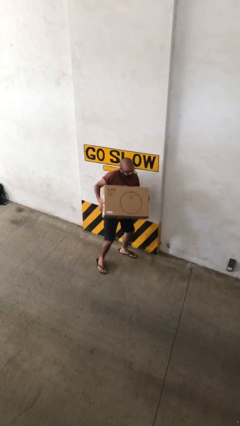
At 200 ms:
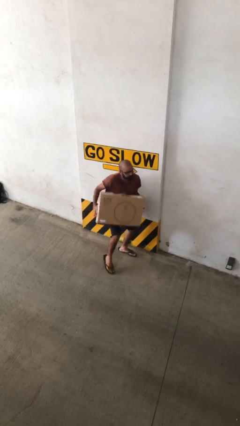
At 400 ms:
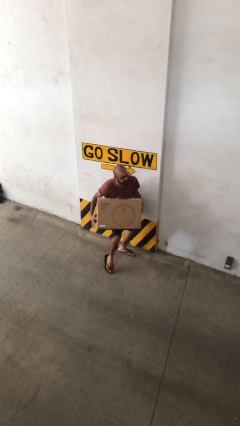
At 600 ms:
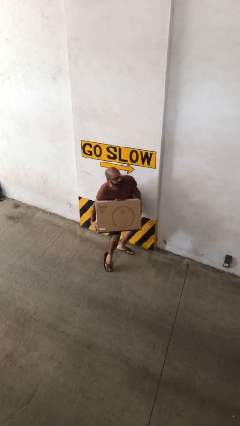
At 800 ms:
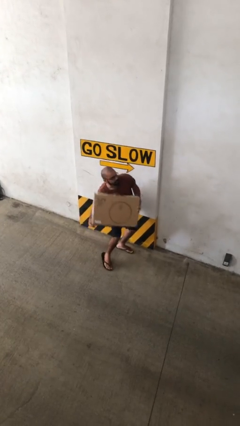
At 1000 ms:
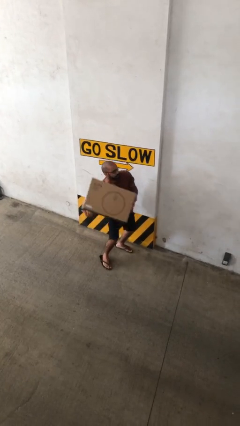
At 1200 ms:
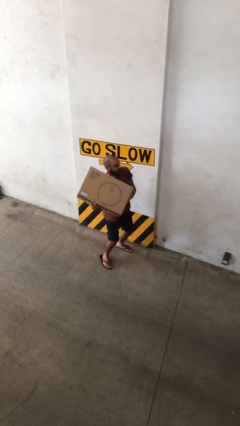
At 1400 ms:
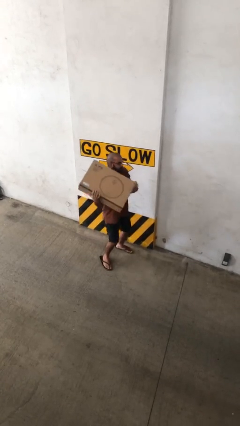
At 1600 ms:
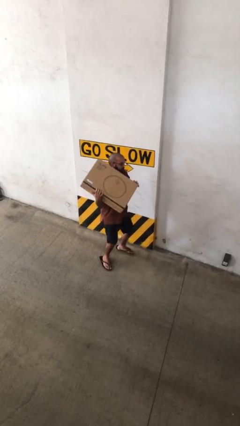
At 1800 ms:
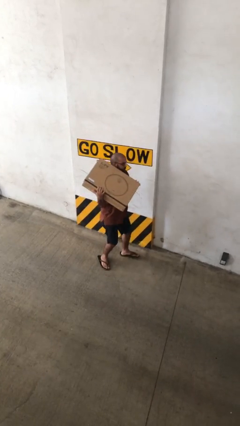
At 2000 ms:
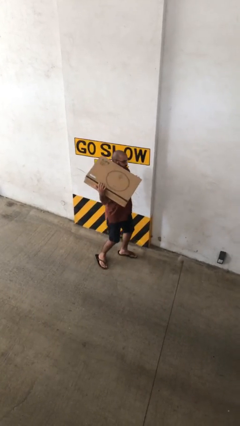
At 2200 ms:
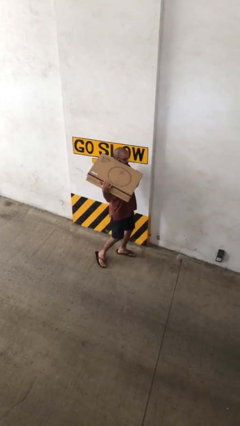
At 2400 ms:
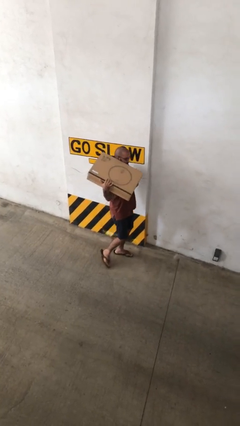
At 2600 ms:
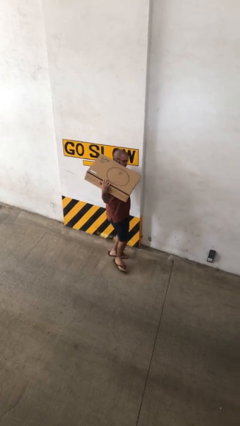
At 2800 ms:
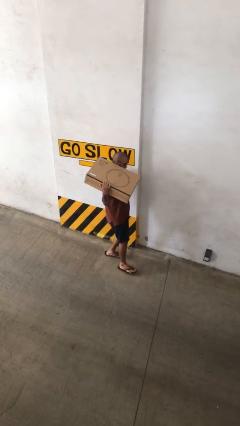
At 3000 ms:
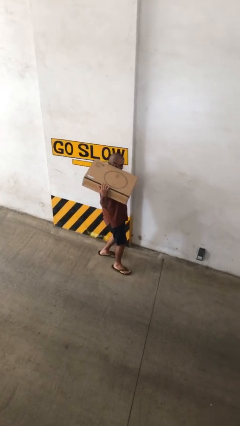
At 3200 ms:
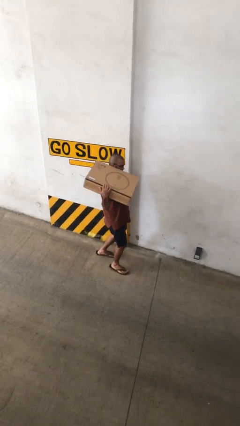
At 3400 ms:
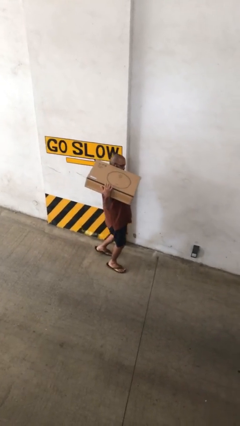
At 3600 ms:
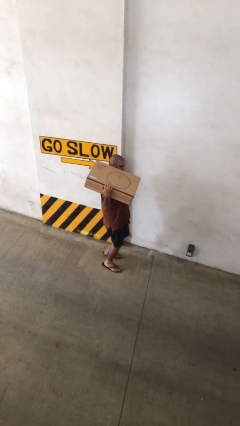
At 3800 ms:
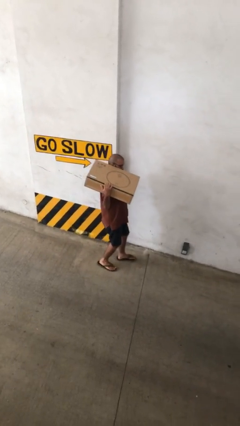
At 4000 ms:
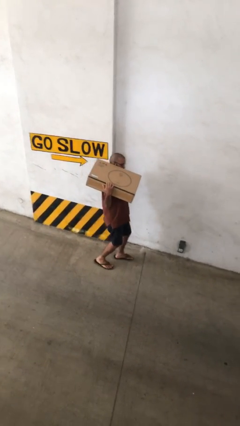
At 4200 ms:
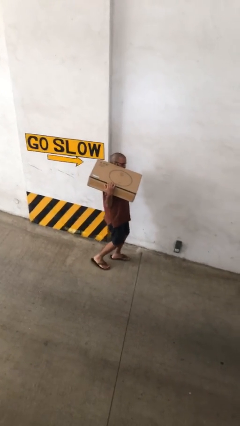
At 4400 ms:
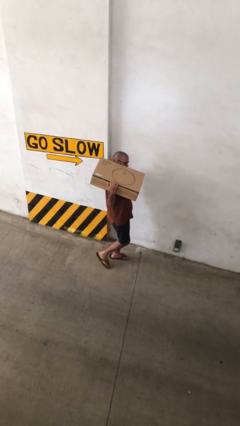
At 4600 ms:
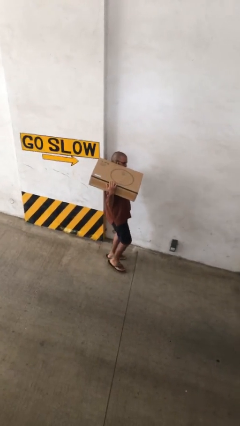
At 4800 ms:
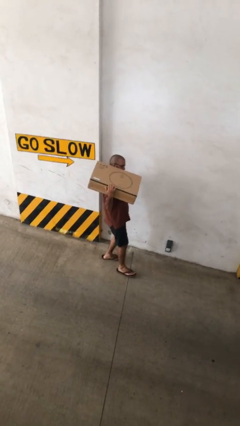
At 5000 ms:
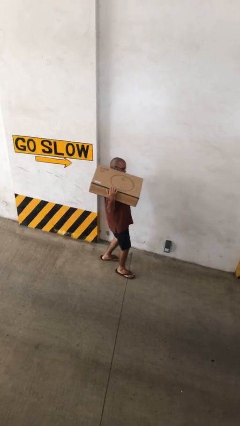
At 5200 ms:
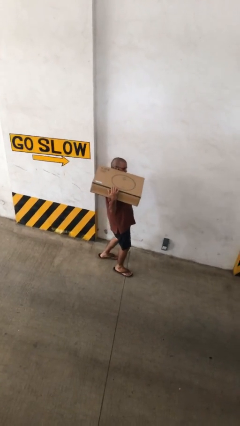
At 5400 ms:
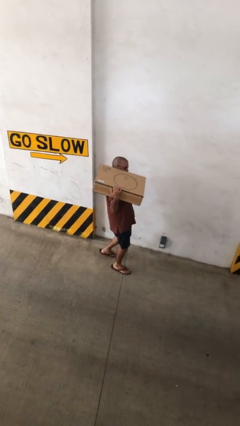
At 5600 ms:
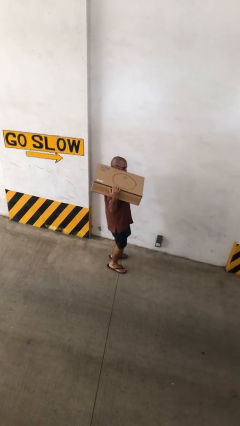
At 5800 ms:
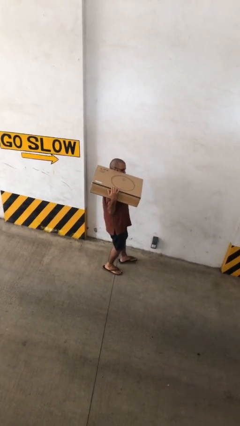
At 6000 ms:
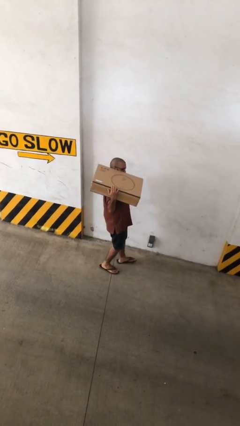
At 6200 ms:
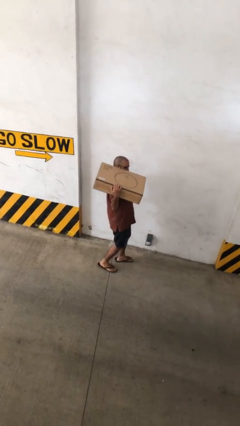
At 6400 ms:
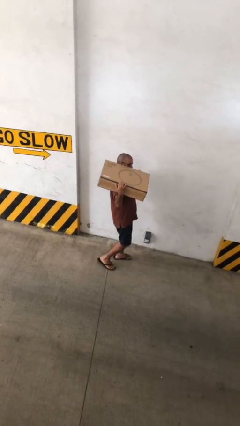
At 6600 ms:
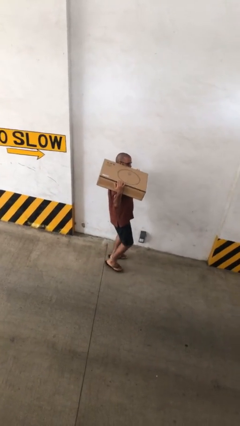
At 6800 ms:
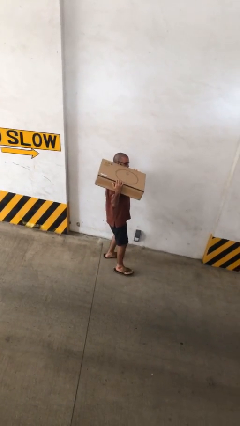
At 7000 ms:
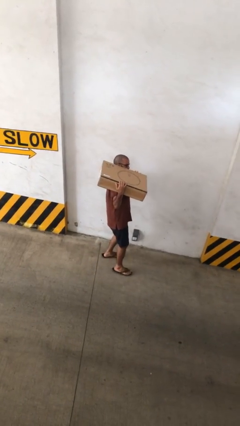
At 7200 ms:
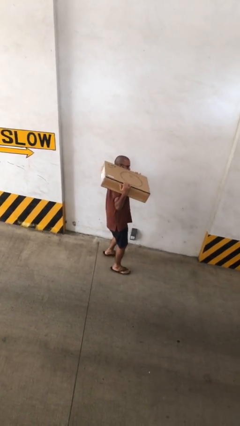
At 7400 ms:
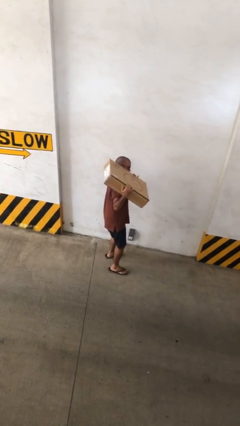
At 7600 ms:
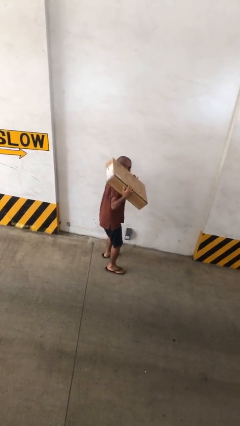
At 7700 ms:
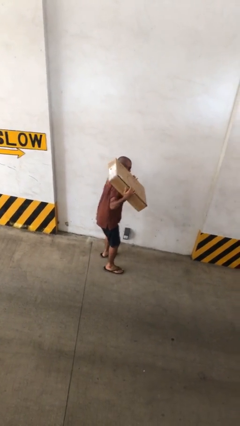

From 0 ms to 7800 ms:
person carries heavy object

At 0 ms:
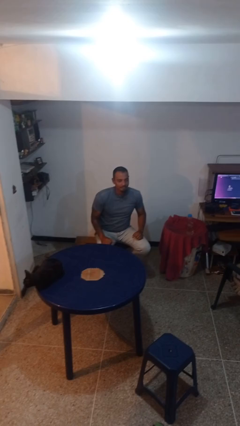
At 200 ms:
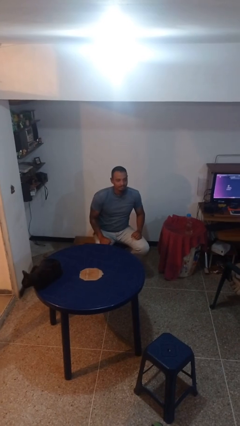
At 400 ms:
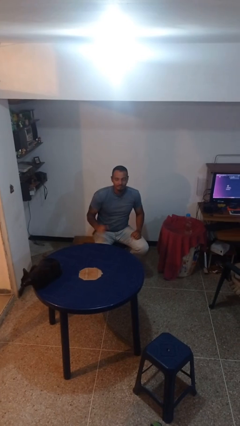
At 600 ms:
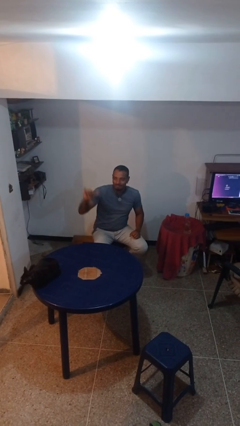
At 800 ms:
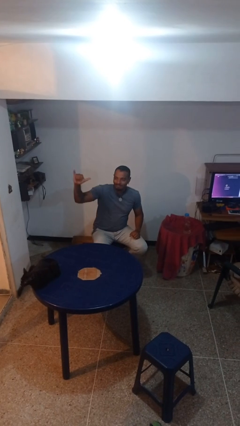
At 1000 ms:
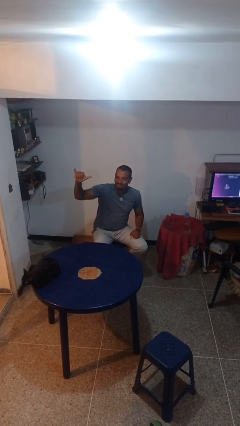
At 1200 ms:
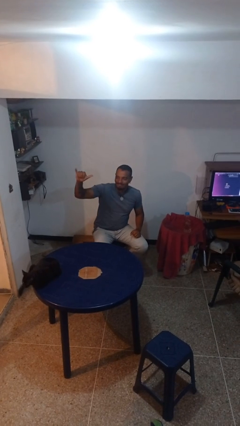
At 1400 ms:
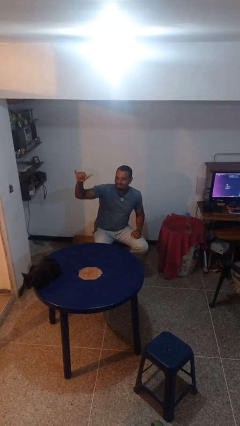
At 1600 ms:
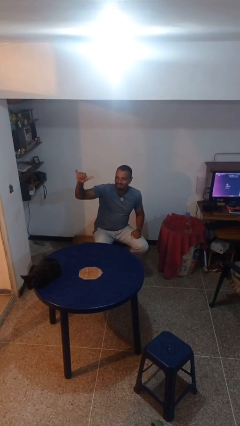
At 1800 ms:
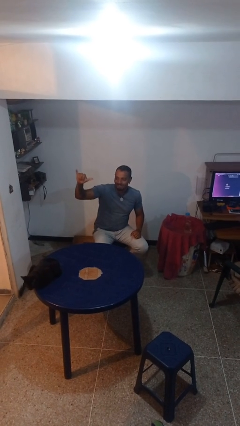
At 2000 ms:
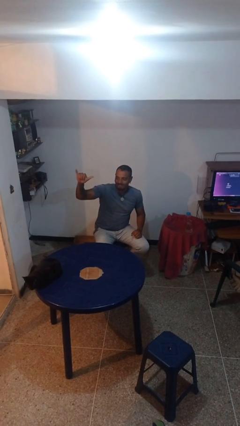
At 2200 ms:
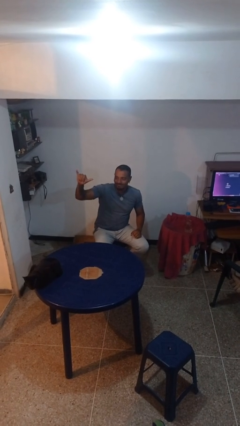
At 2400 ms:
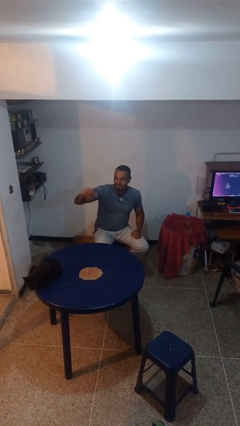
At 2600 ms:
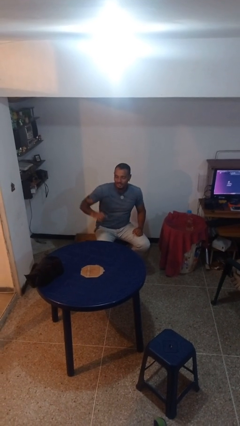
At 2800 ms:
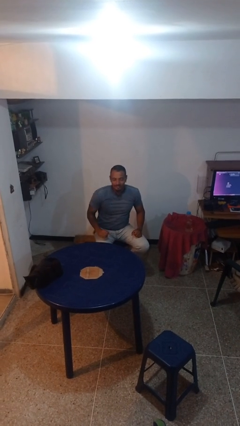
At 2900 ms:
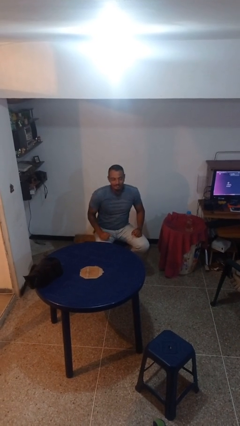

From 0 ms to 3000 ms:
person gestures hang loose

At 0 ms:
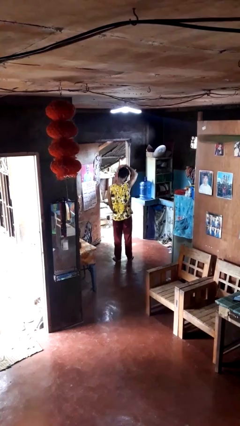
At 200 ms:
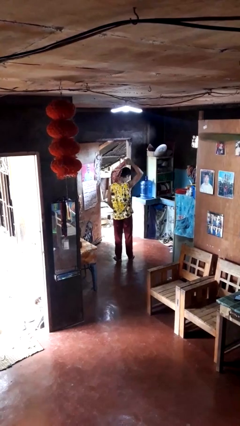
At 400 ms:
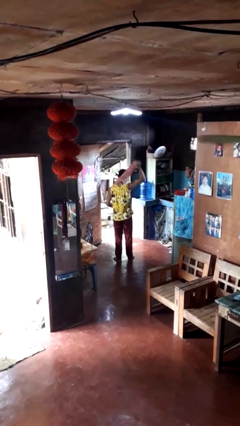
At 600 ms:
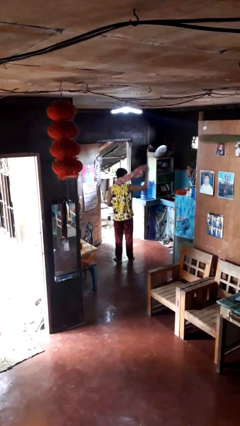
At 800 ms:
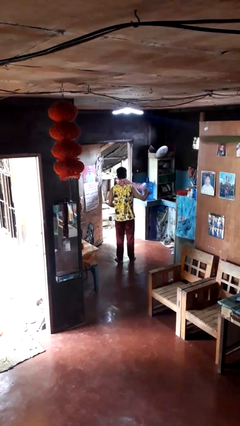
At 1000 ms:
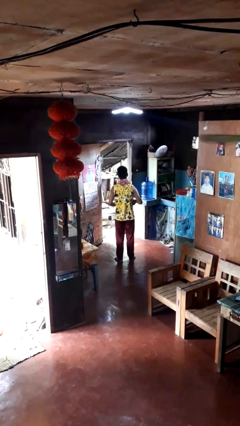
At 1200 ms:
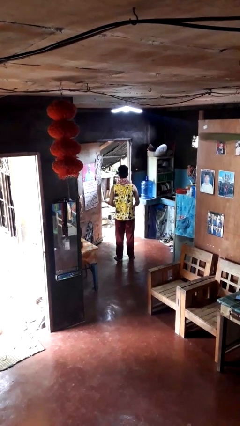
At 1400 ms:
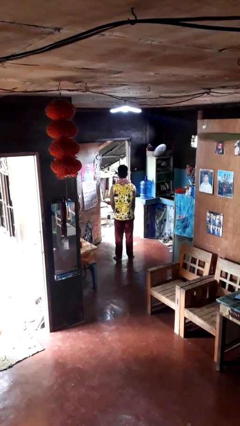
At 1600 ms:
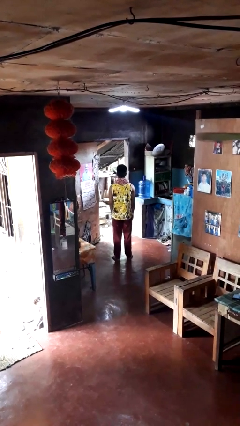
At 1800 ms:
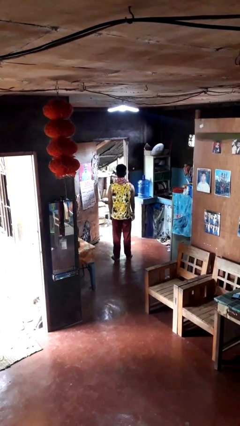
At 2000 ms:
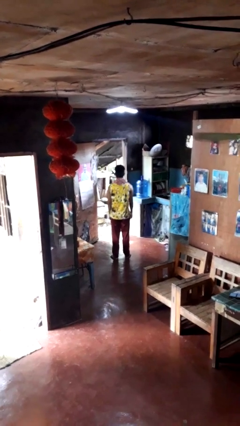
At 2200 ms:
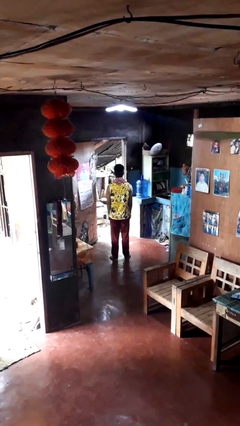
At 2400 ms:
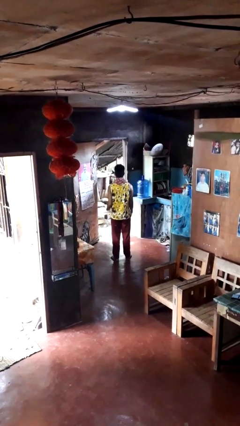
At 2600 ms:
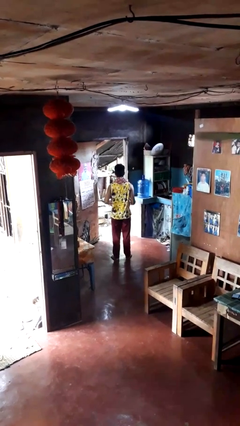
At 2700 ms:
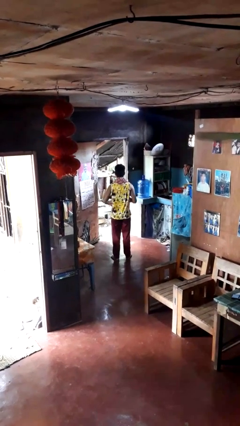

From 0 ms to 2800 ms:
person puts on scarf

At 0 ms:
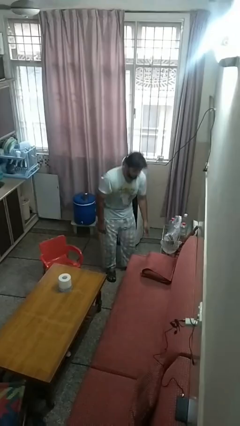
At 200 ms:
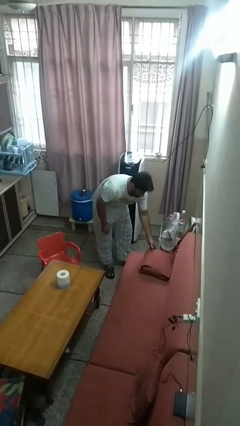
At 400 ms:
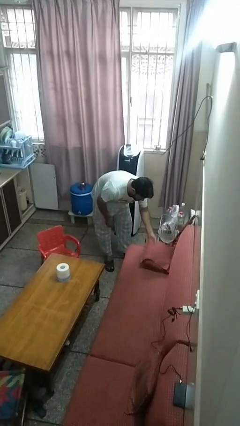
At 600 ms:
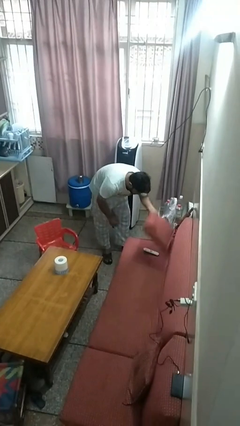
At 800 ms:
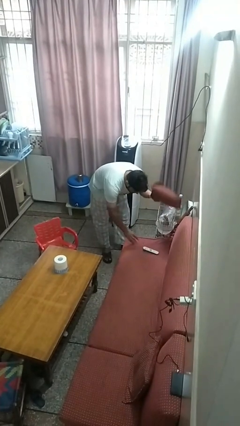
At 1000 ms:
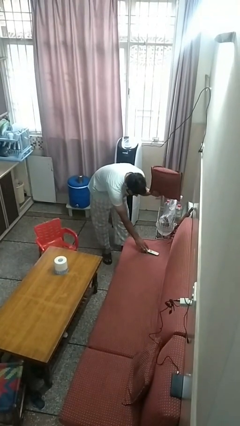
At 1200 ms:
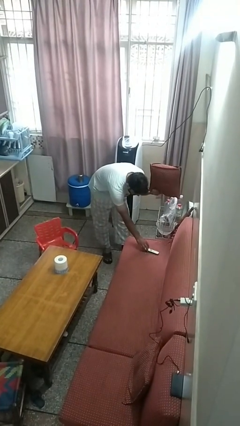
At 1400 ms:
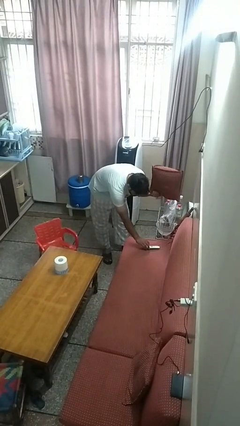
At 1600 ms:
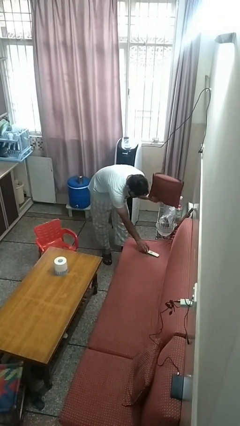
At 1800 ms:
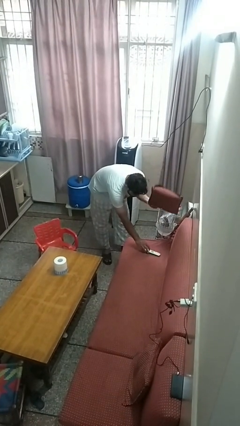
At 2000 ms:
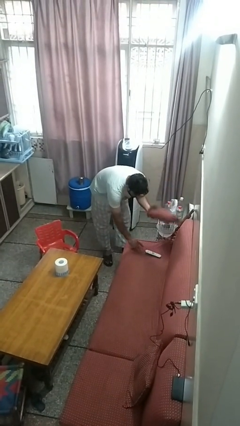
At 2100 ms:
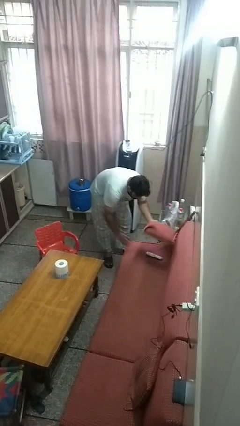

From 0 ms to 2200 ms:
person searches in couch

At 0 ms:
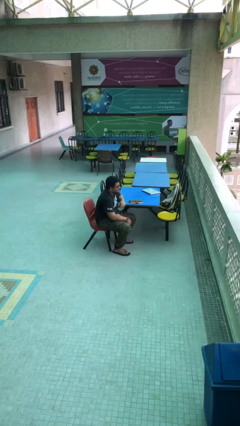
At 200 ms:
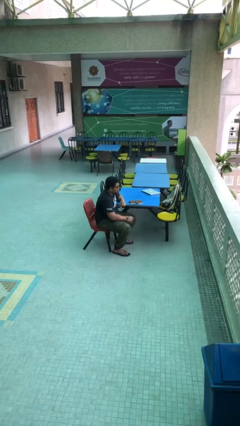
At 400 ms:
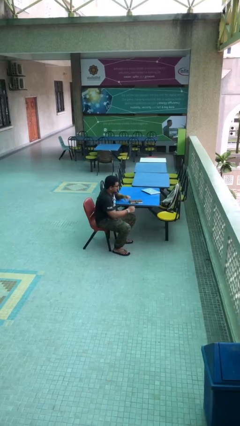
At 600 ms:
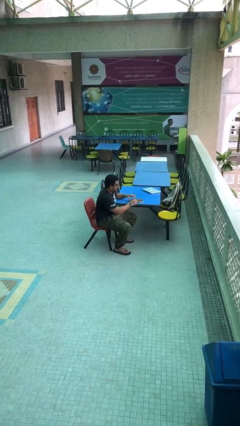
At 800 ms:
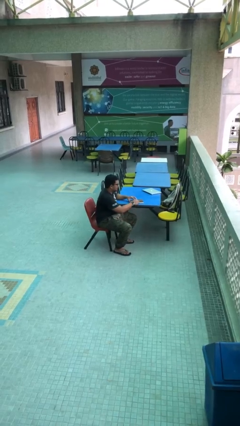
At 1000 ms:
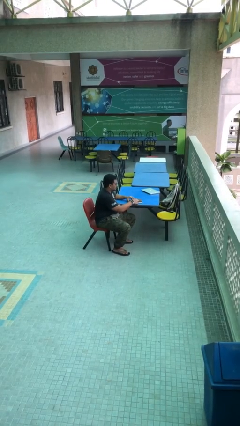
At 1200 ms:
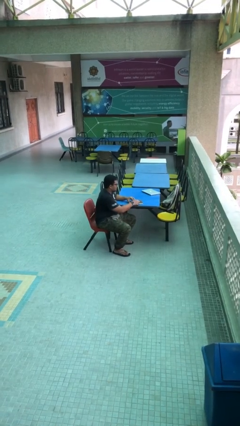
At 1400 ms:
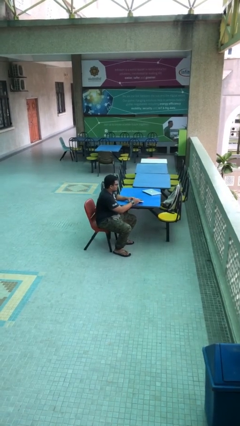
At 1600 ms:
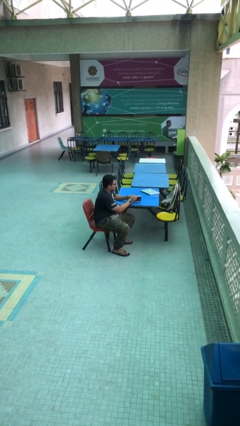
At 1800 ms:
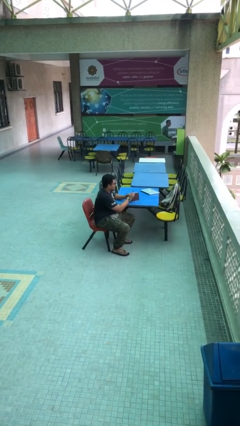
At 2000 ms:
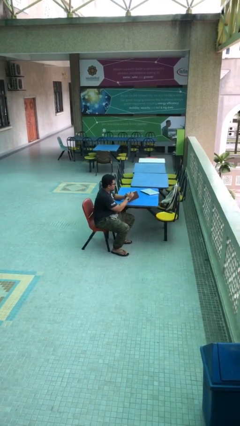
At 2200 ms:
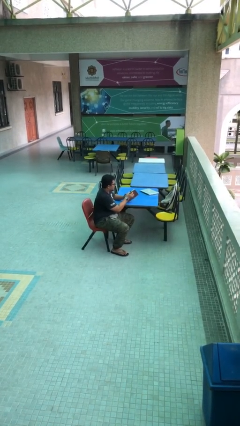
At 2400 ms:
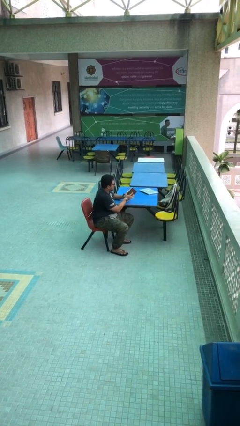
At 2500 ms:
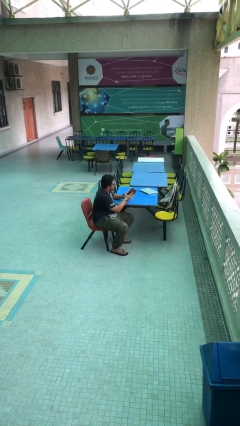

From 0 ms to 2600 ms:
person picks up object from table
